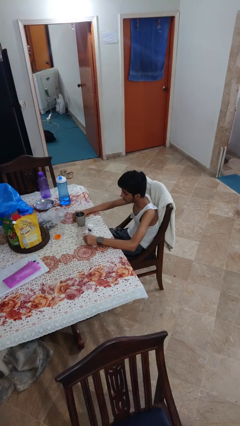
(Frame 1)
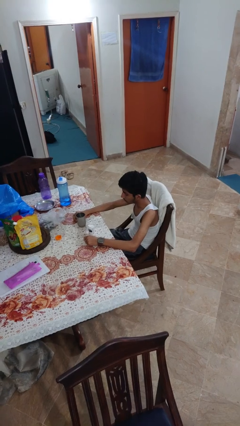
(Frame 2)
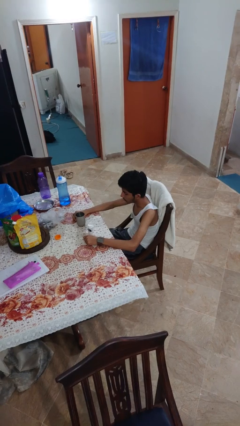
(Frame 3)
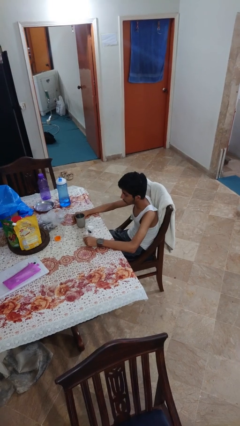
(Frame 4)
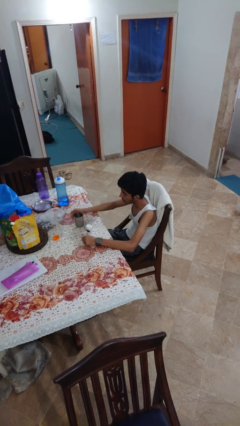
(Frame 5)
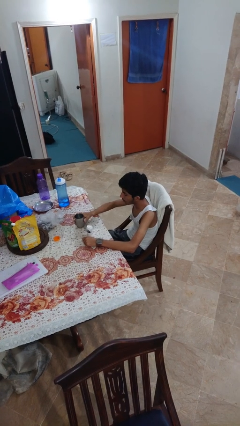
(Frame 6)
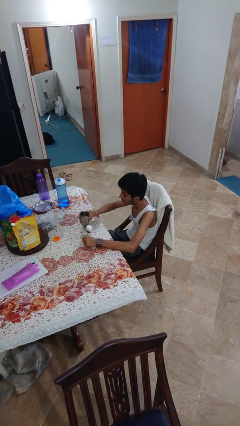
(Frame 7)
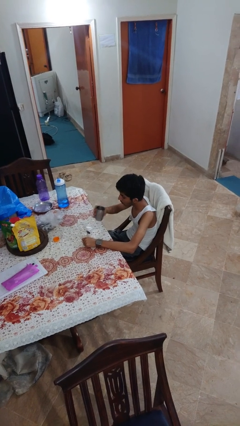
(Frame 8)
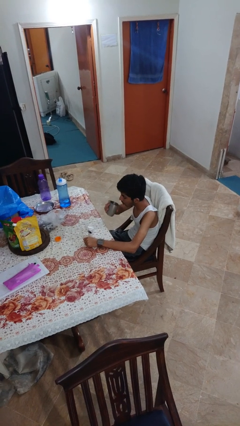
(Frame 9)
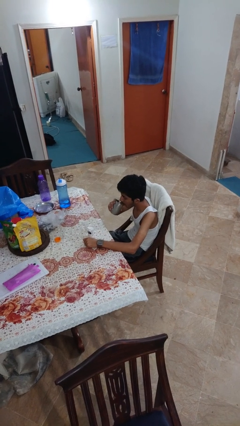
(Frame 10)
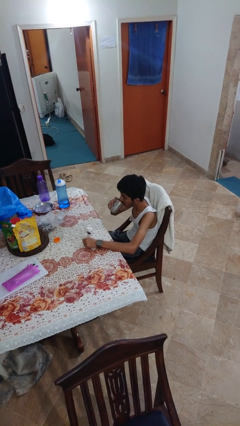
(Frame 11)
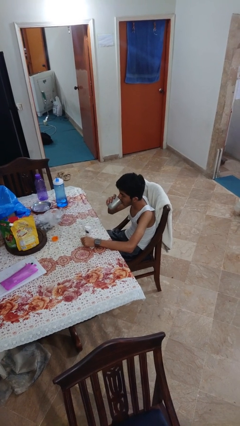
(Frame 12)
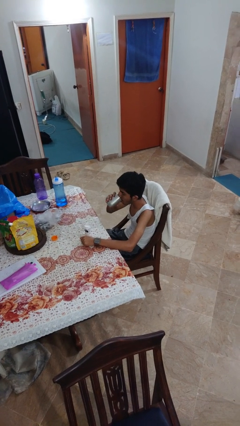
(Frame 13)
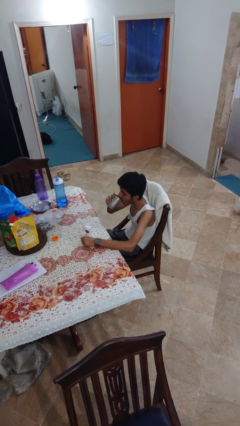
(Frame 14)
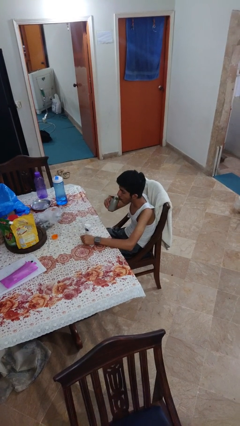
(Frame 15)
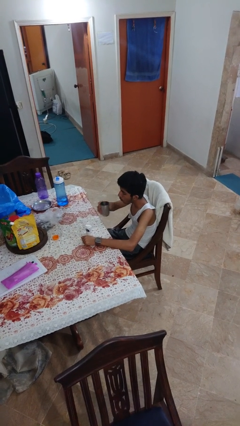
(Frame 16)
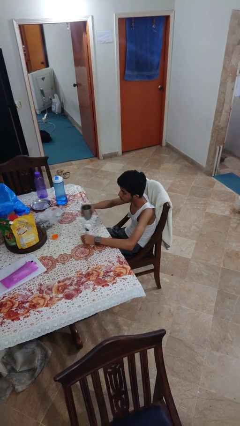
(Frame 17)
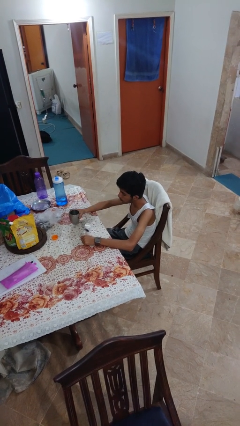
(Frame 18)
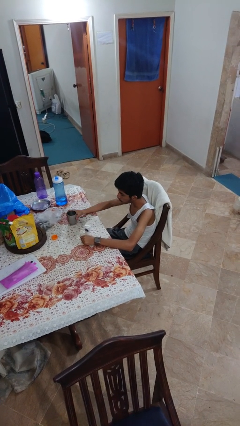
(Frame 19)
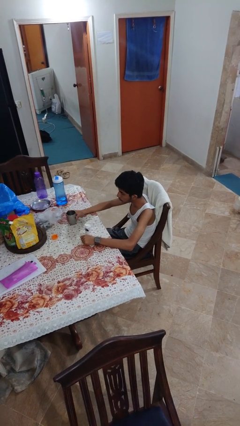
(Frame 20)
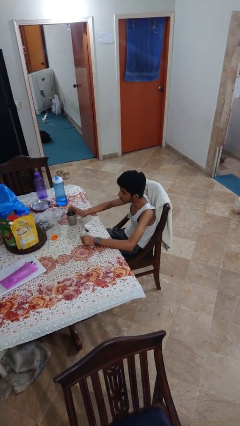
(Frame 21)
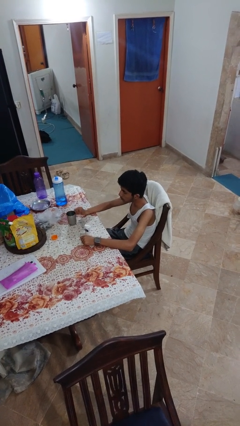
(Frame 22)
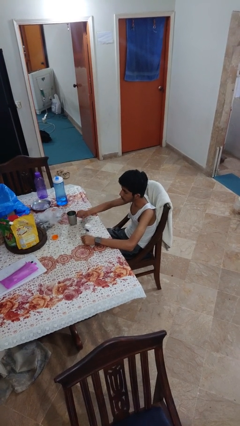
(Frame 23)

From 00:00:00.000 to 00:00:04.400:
person drinks from cup

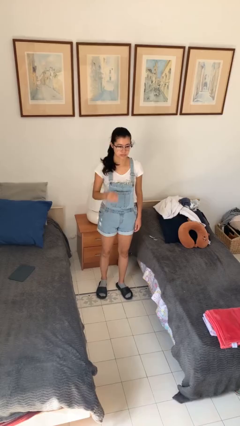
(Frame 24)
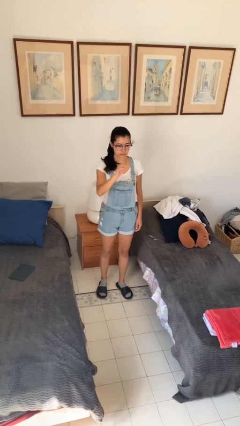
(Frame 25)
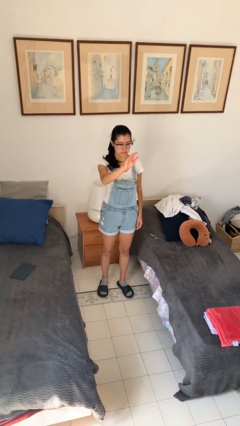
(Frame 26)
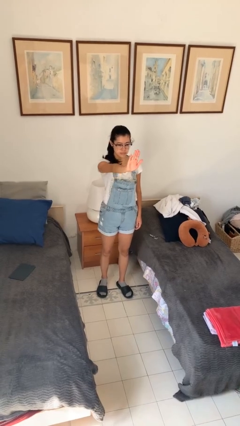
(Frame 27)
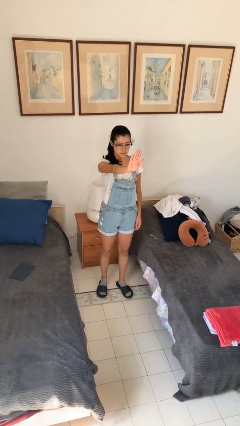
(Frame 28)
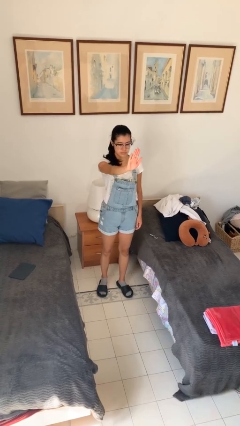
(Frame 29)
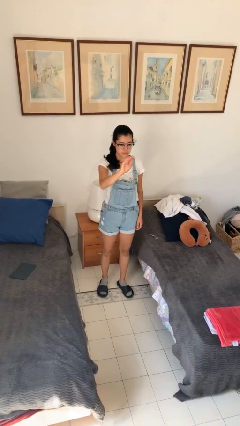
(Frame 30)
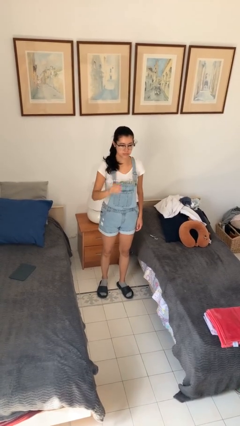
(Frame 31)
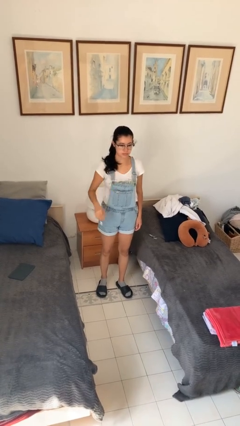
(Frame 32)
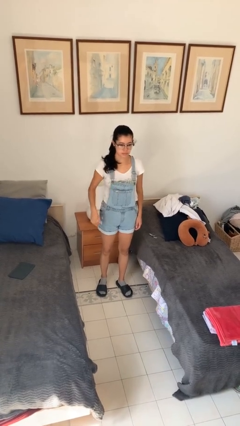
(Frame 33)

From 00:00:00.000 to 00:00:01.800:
person gestures stop

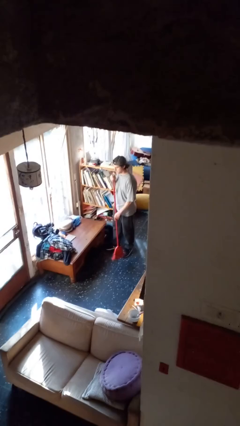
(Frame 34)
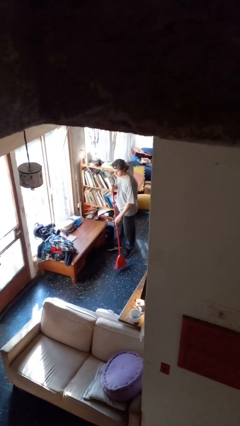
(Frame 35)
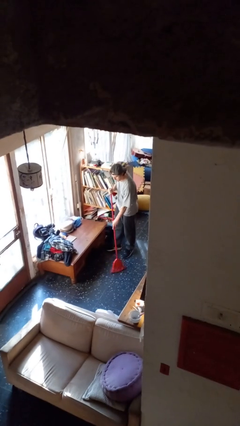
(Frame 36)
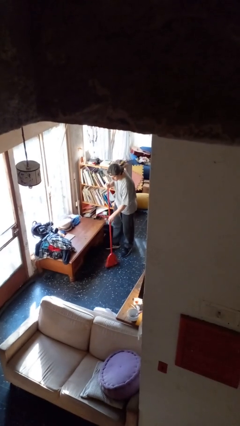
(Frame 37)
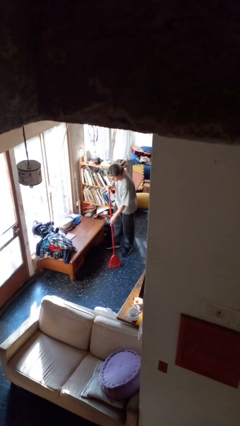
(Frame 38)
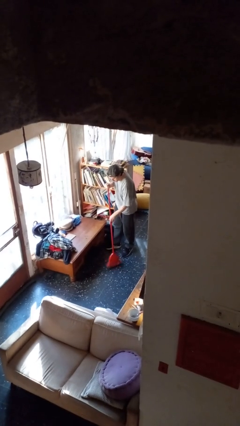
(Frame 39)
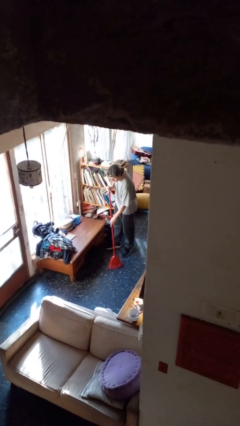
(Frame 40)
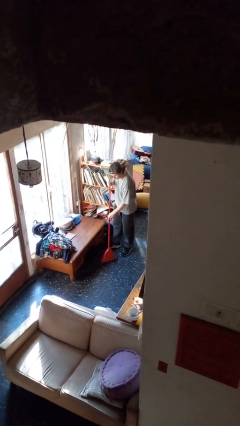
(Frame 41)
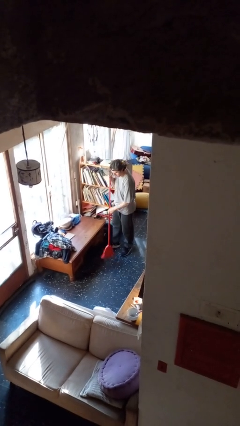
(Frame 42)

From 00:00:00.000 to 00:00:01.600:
person sweeps floor

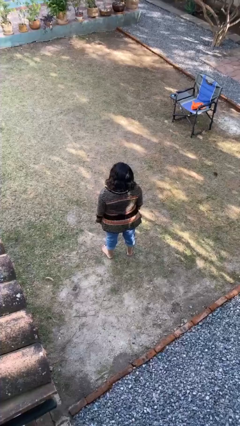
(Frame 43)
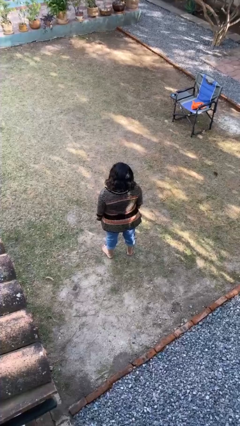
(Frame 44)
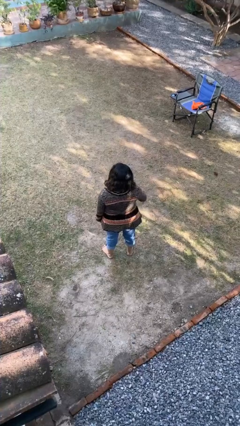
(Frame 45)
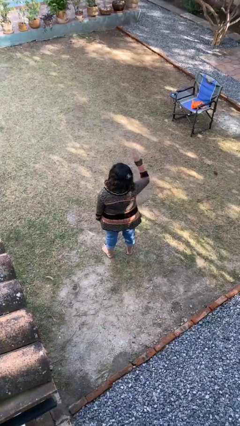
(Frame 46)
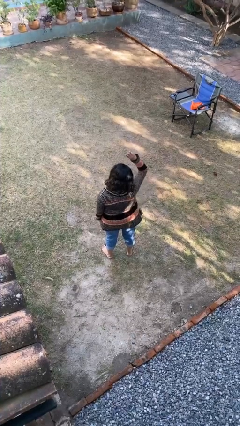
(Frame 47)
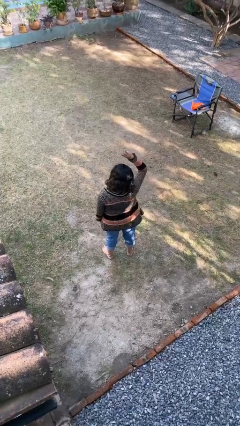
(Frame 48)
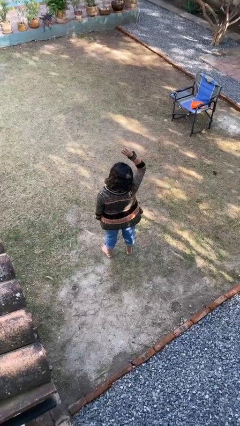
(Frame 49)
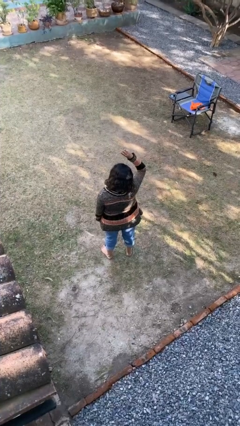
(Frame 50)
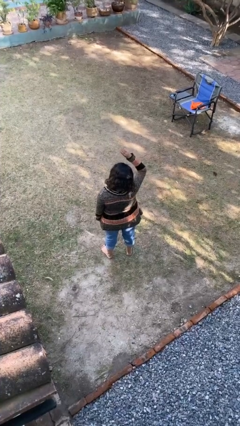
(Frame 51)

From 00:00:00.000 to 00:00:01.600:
person gestures number three

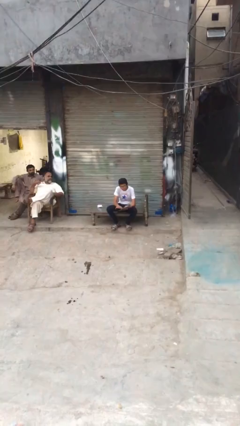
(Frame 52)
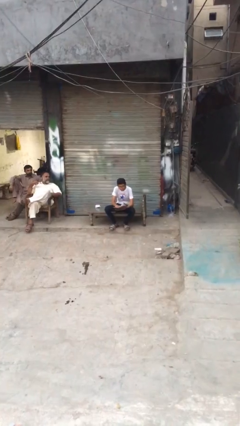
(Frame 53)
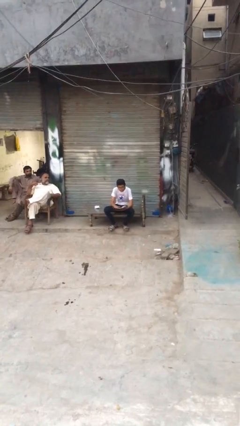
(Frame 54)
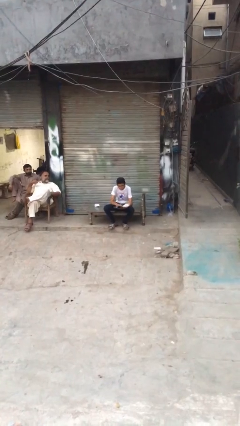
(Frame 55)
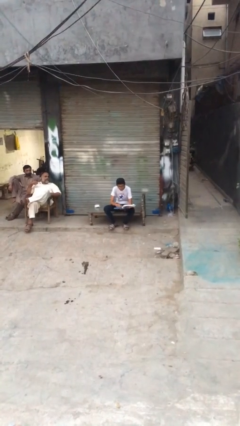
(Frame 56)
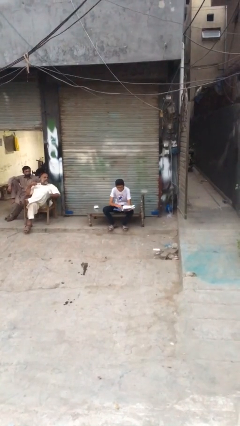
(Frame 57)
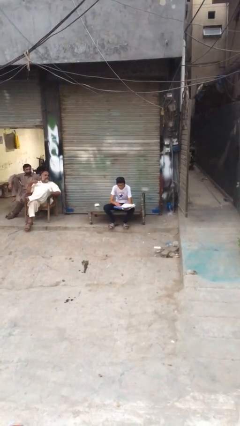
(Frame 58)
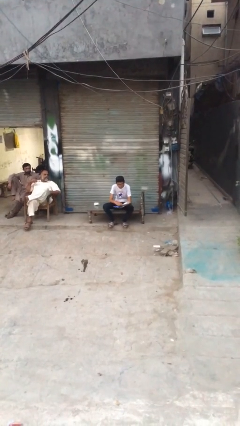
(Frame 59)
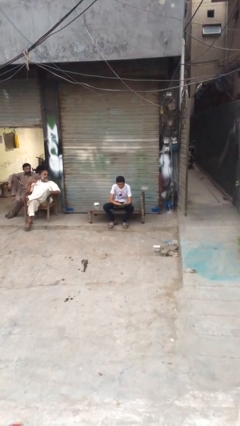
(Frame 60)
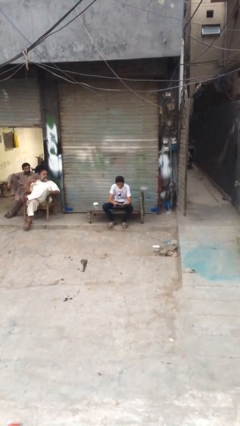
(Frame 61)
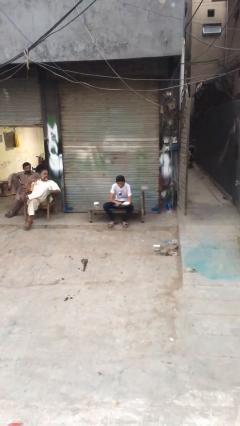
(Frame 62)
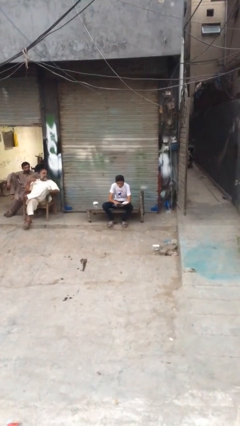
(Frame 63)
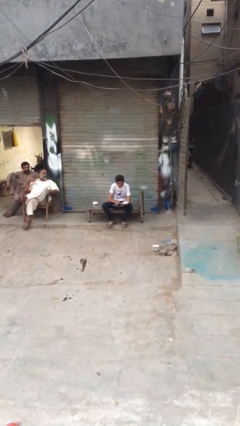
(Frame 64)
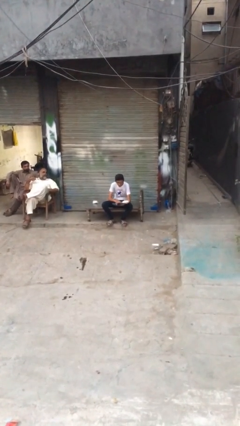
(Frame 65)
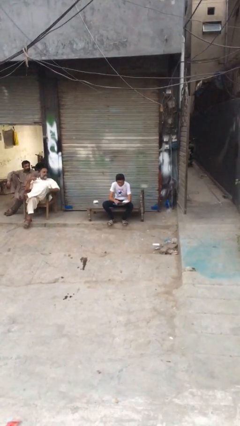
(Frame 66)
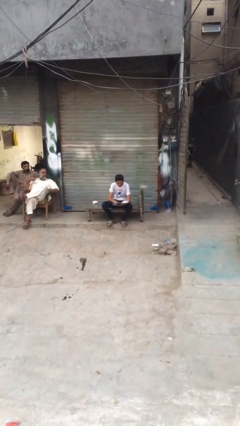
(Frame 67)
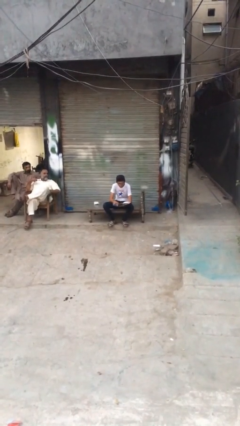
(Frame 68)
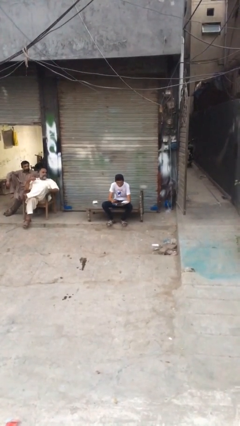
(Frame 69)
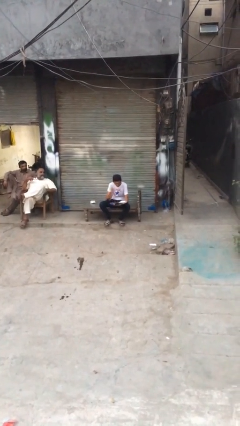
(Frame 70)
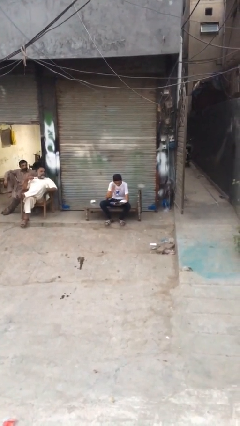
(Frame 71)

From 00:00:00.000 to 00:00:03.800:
person reads document

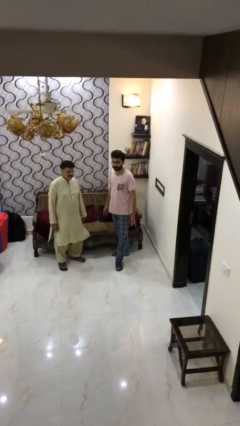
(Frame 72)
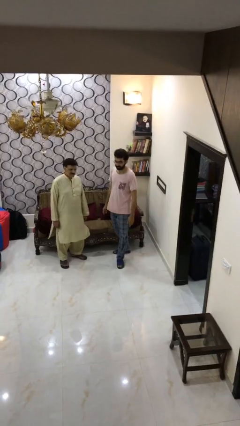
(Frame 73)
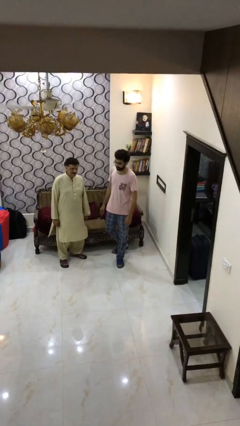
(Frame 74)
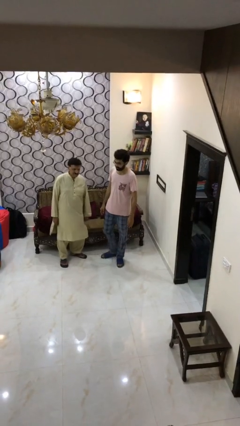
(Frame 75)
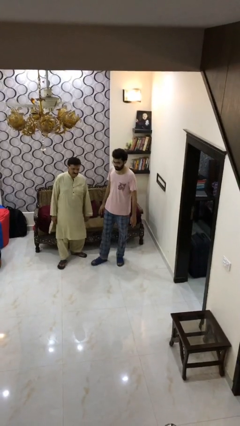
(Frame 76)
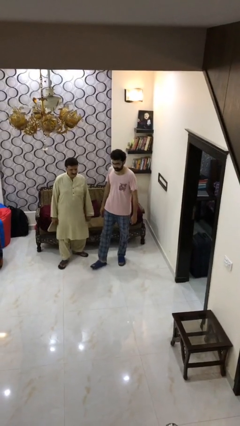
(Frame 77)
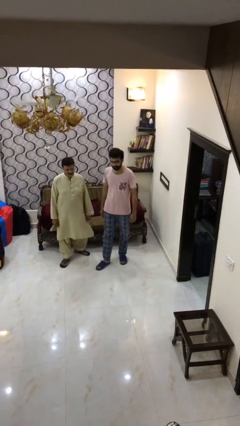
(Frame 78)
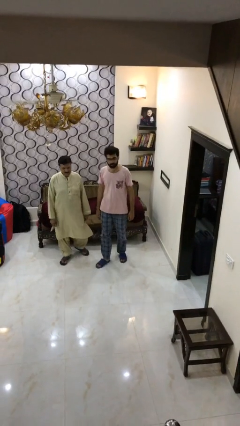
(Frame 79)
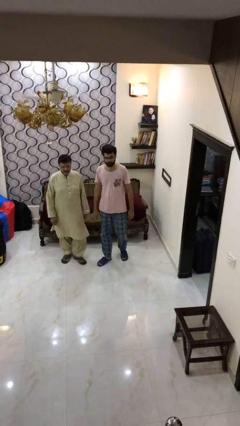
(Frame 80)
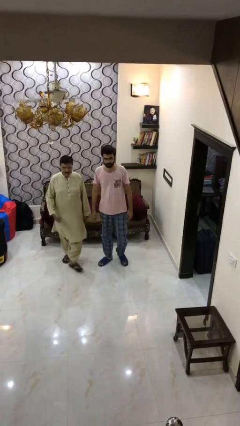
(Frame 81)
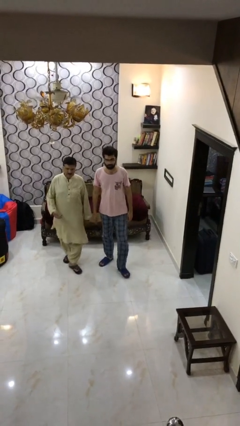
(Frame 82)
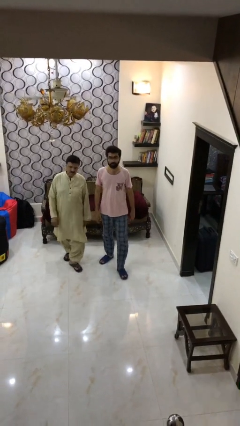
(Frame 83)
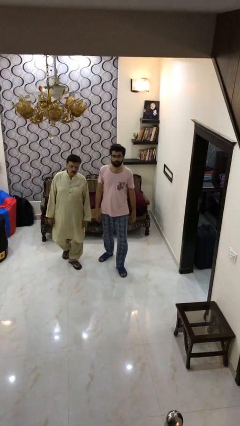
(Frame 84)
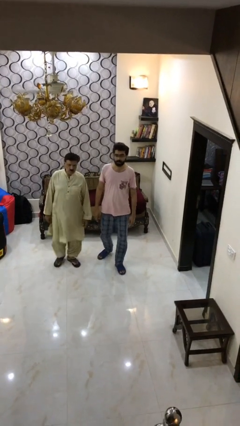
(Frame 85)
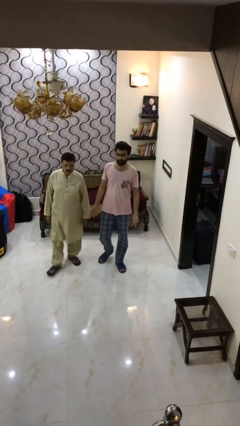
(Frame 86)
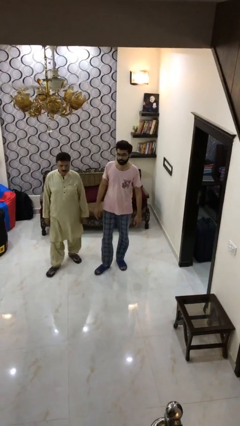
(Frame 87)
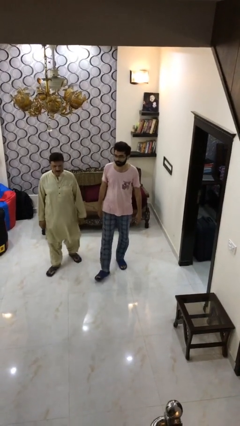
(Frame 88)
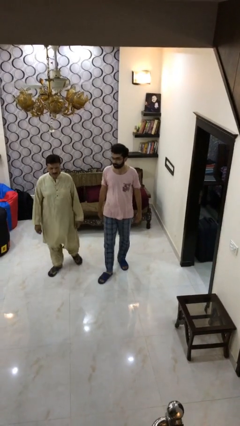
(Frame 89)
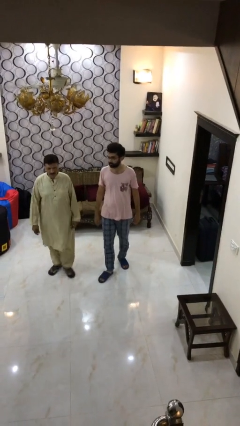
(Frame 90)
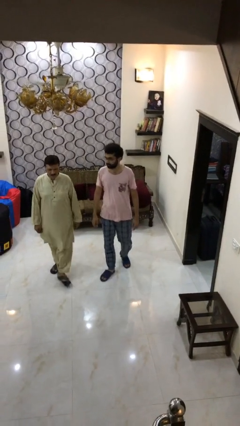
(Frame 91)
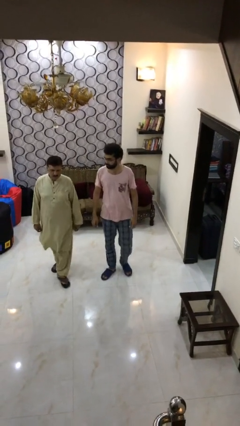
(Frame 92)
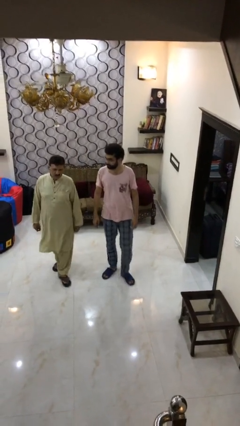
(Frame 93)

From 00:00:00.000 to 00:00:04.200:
person talks to person
